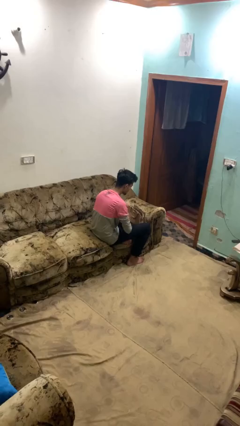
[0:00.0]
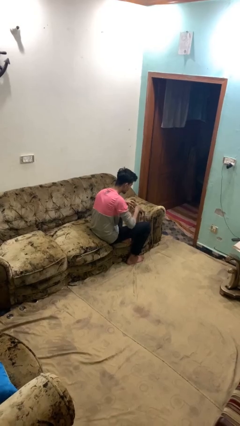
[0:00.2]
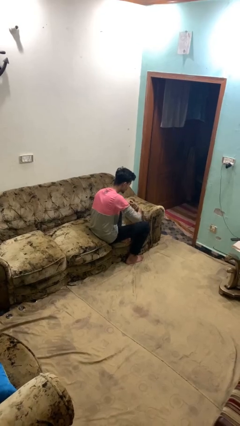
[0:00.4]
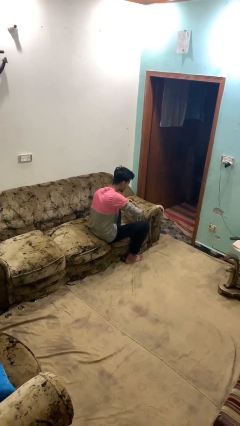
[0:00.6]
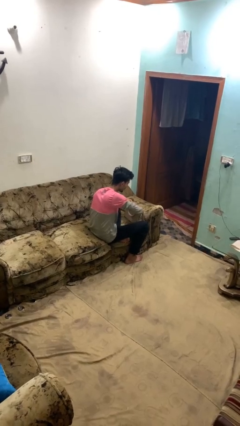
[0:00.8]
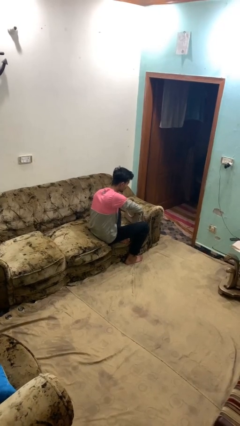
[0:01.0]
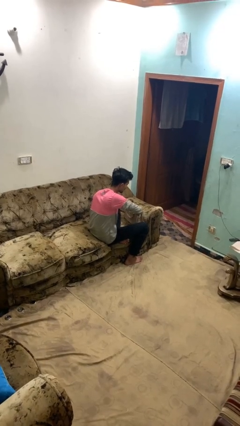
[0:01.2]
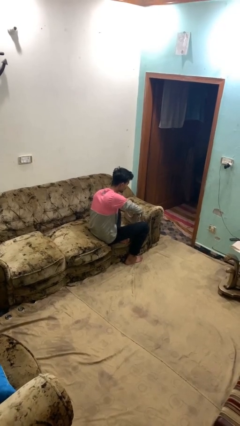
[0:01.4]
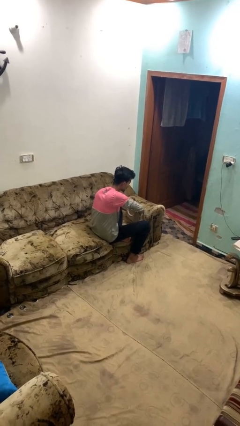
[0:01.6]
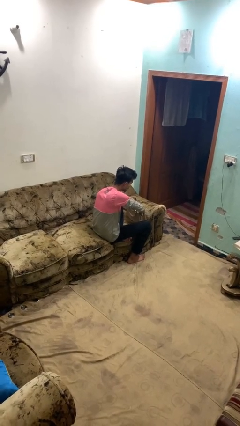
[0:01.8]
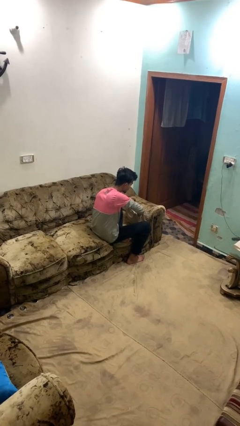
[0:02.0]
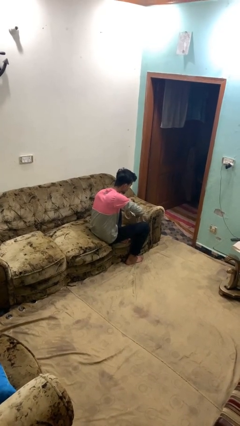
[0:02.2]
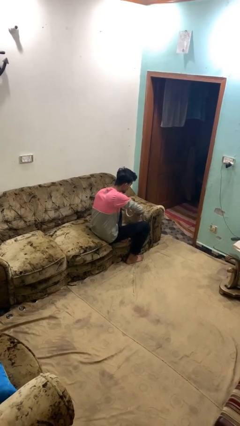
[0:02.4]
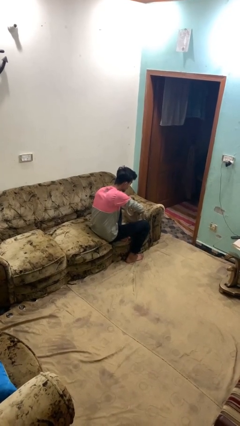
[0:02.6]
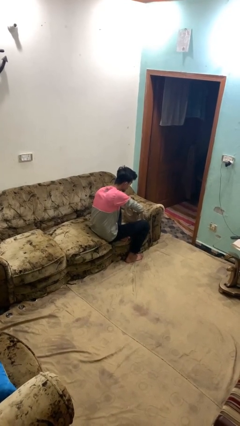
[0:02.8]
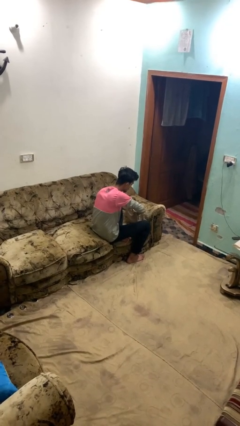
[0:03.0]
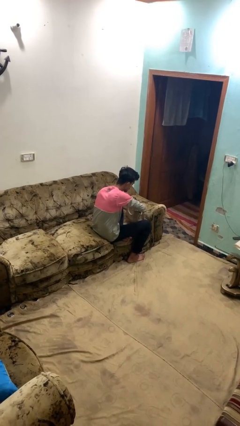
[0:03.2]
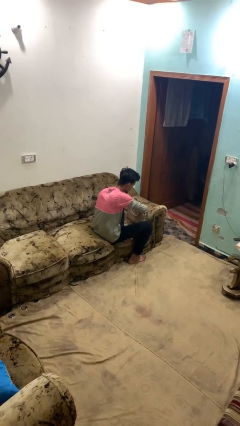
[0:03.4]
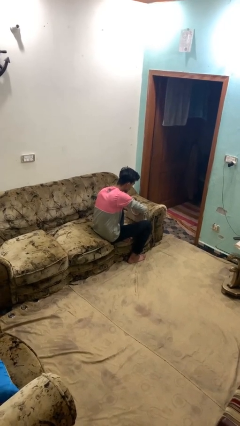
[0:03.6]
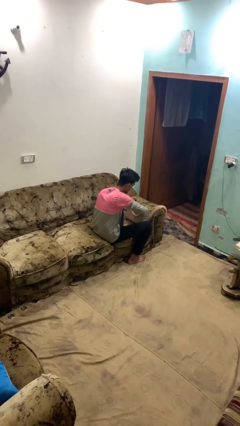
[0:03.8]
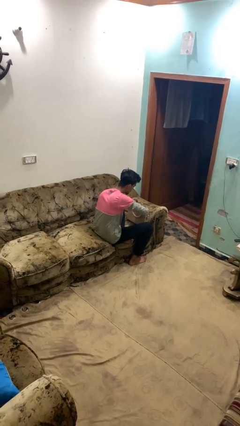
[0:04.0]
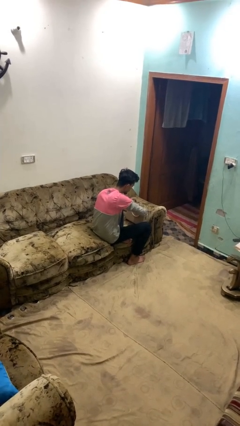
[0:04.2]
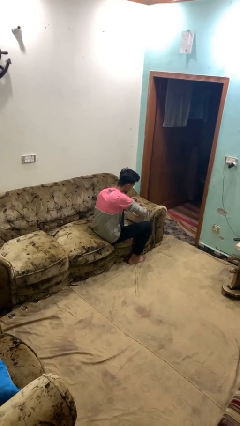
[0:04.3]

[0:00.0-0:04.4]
person searches in purse

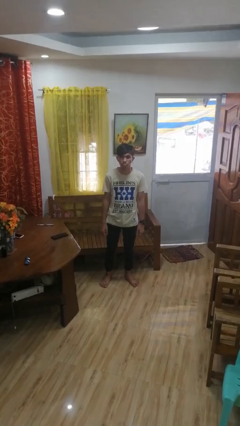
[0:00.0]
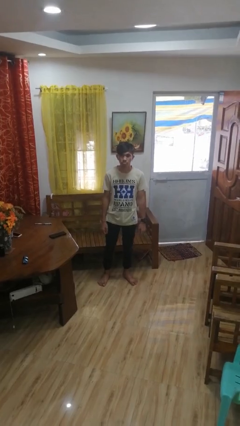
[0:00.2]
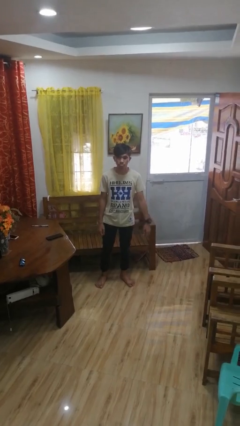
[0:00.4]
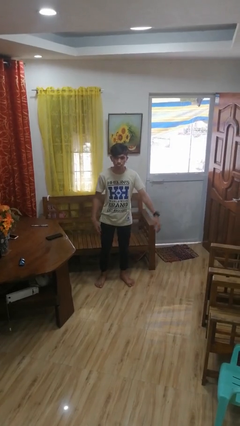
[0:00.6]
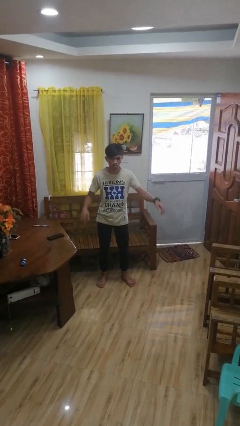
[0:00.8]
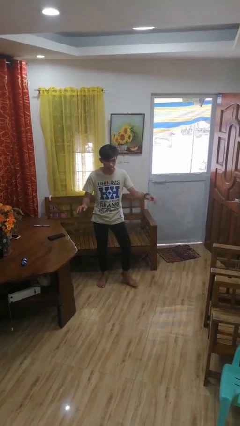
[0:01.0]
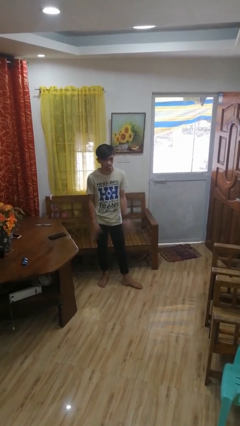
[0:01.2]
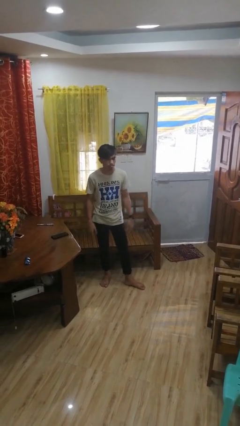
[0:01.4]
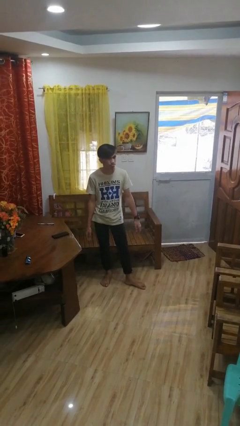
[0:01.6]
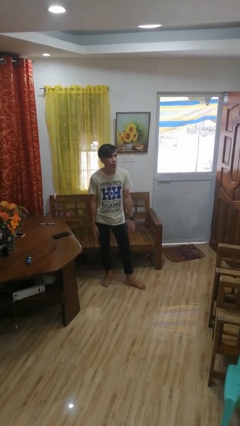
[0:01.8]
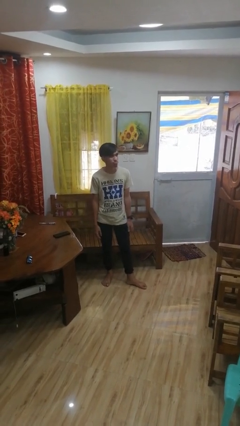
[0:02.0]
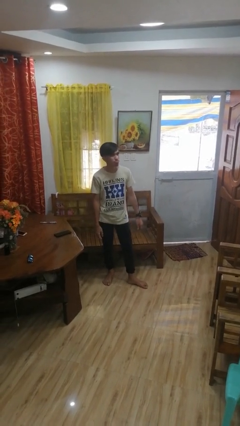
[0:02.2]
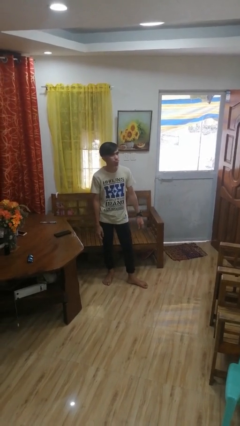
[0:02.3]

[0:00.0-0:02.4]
person slaps hands on thighs

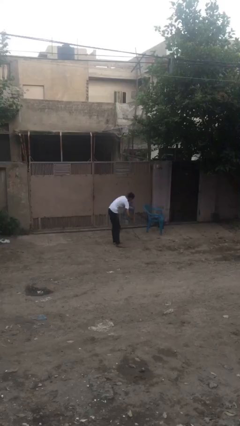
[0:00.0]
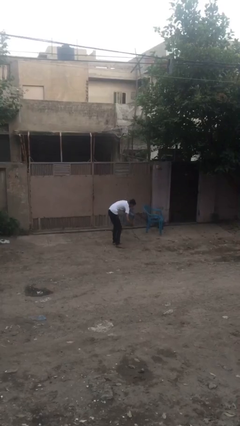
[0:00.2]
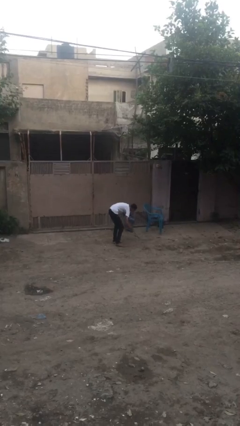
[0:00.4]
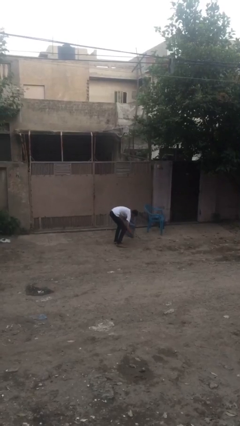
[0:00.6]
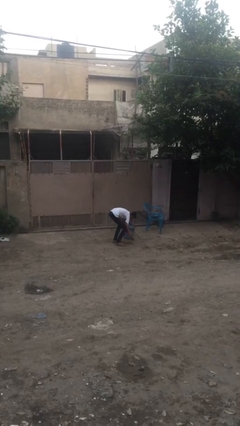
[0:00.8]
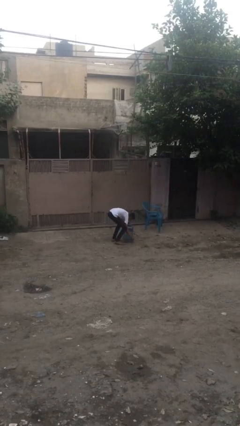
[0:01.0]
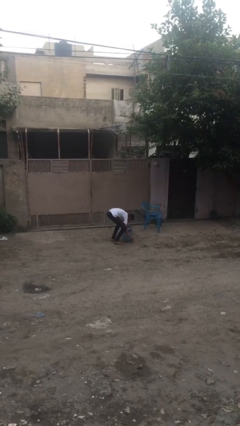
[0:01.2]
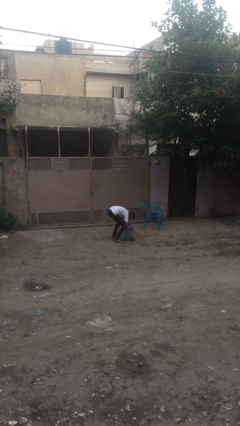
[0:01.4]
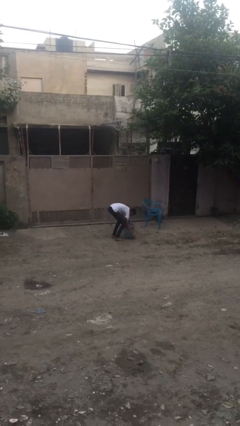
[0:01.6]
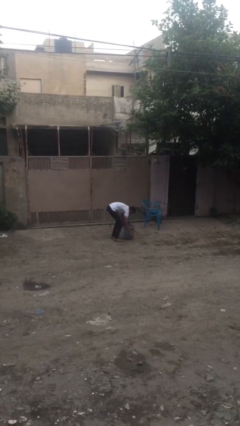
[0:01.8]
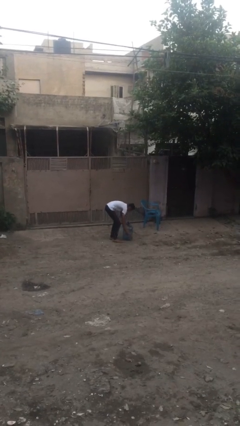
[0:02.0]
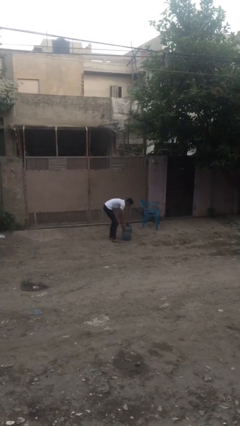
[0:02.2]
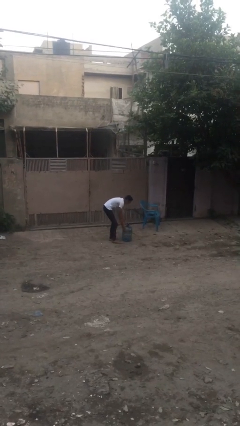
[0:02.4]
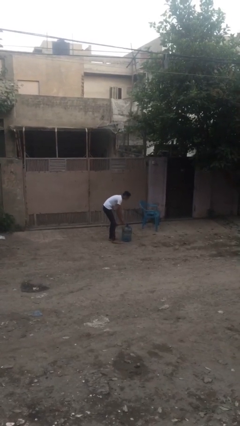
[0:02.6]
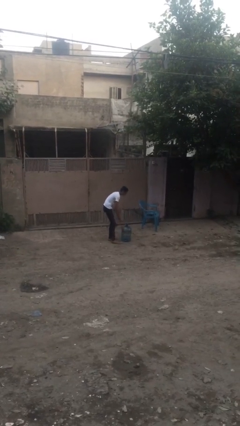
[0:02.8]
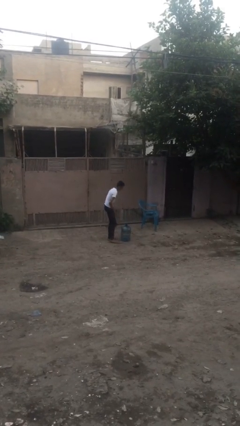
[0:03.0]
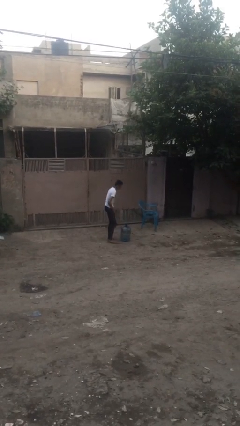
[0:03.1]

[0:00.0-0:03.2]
person puts down object on floor

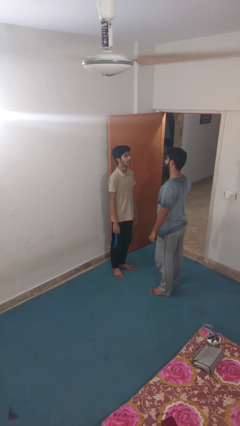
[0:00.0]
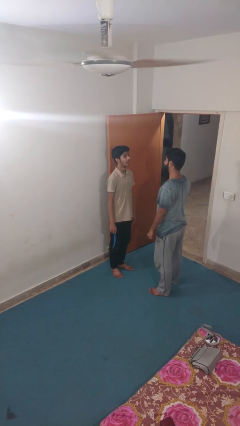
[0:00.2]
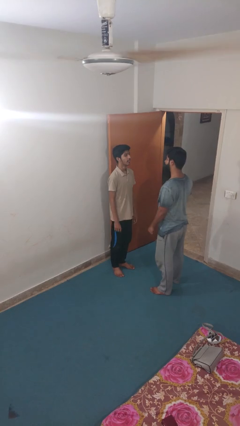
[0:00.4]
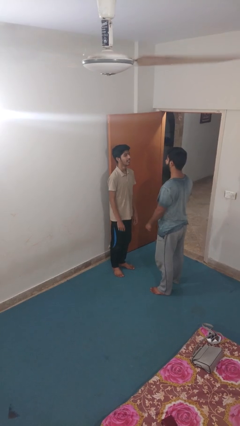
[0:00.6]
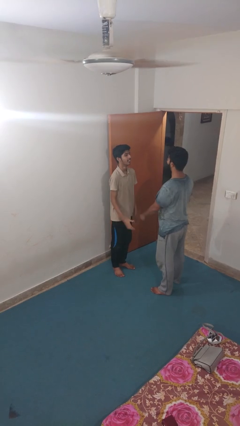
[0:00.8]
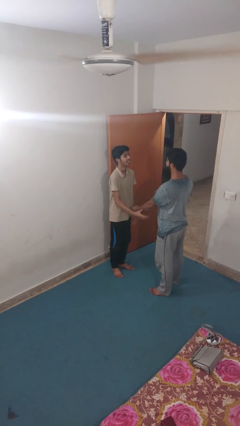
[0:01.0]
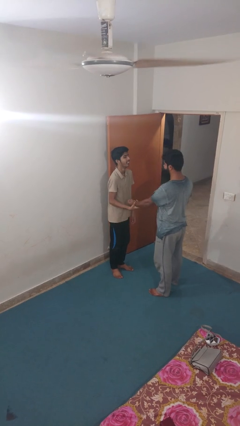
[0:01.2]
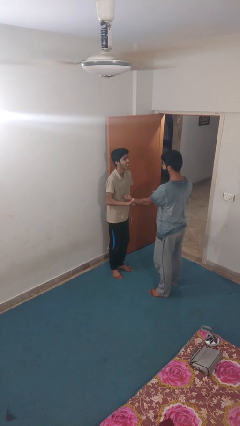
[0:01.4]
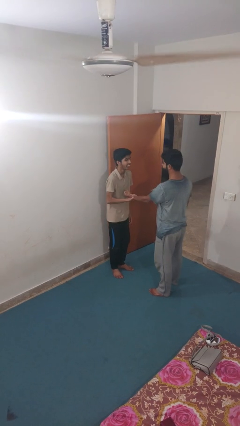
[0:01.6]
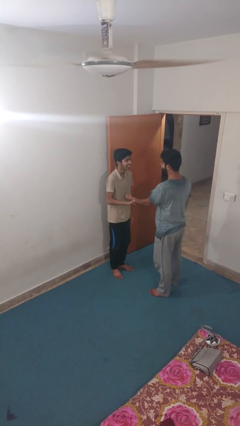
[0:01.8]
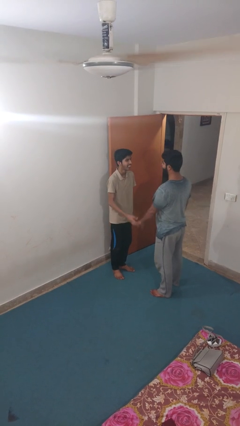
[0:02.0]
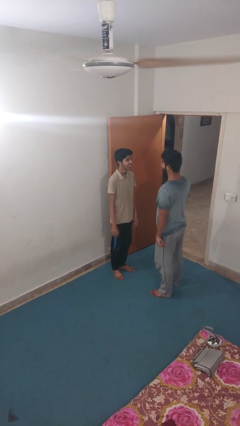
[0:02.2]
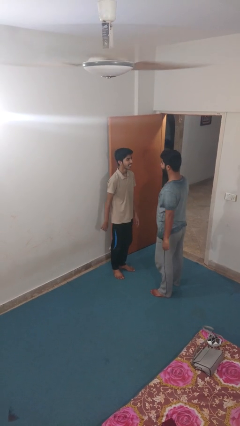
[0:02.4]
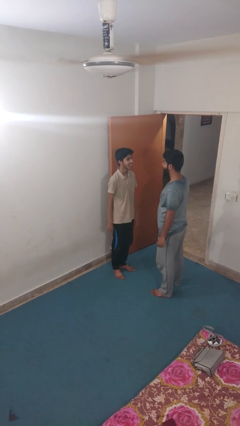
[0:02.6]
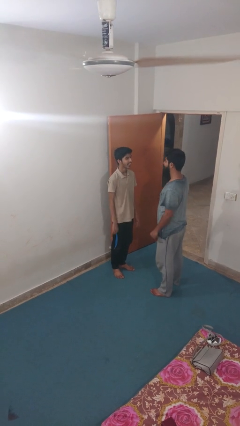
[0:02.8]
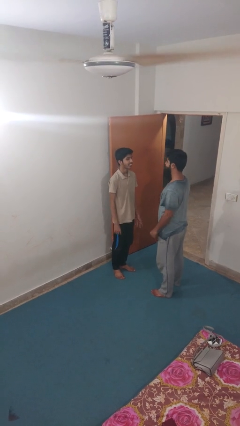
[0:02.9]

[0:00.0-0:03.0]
person grabs person by forearm

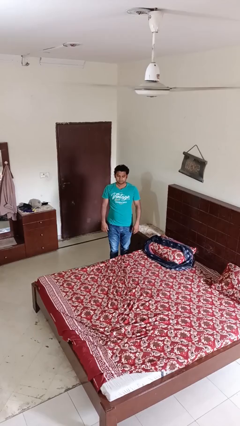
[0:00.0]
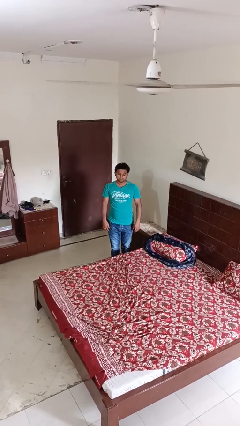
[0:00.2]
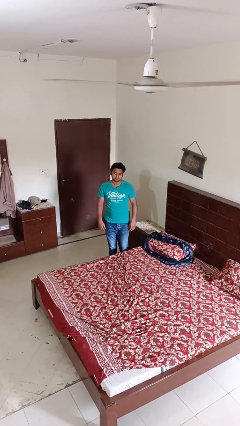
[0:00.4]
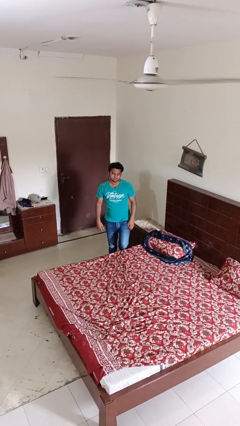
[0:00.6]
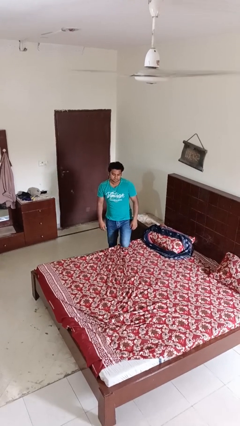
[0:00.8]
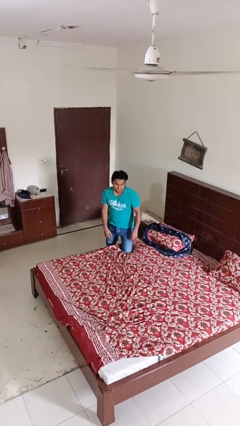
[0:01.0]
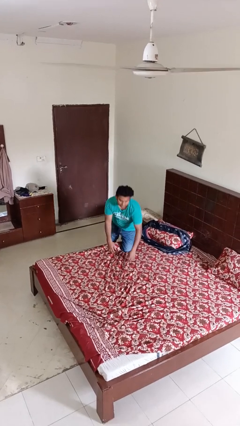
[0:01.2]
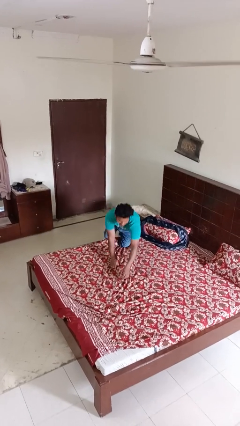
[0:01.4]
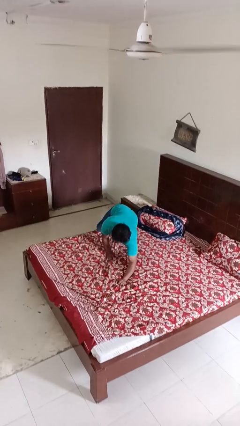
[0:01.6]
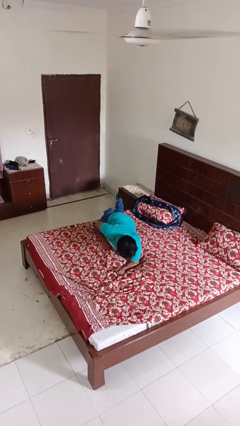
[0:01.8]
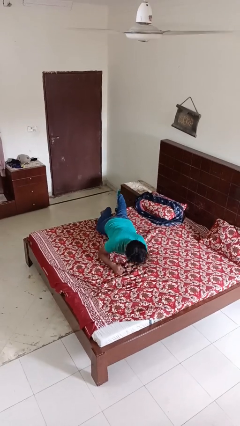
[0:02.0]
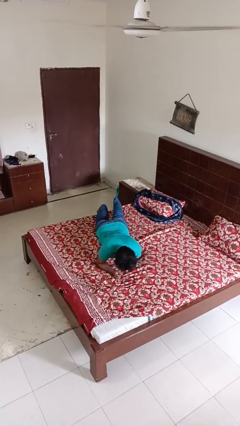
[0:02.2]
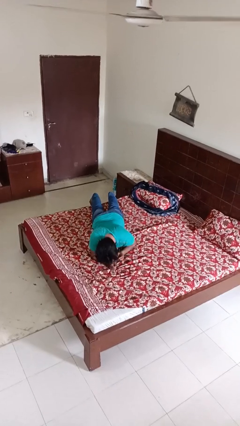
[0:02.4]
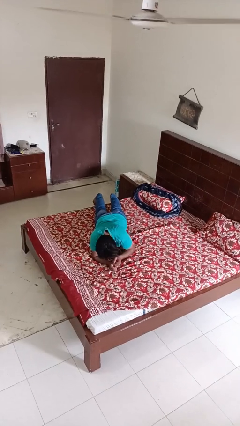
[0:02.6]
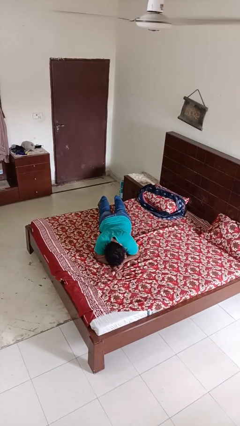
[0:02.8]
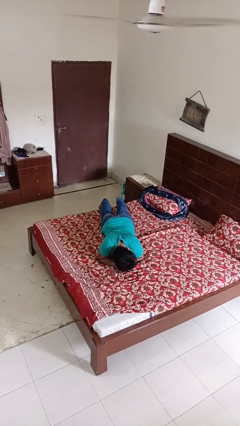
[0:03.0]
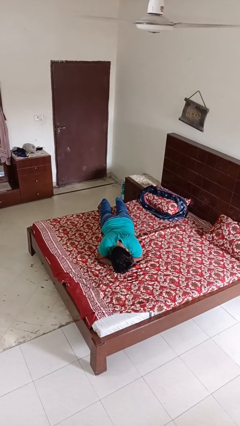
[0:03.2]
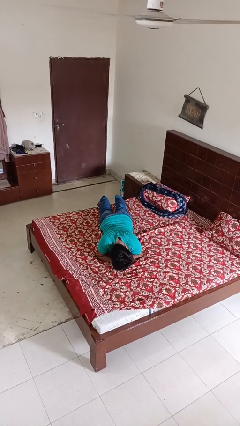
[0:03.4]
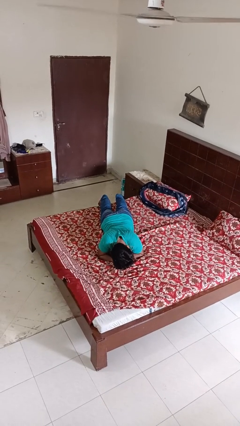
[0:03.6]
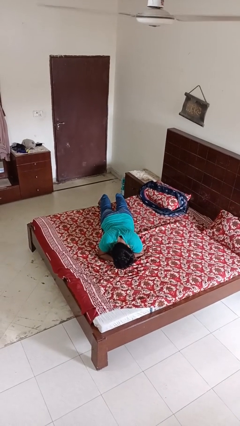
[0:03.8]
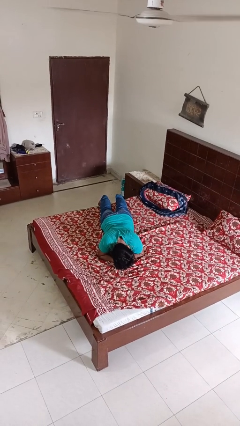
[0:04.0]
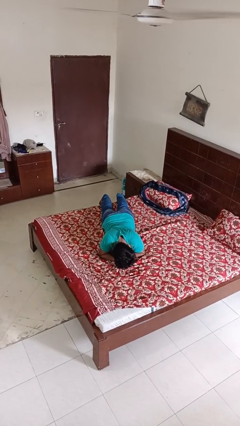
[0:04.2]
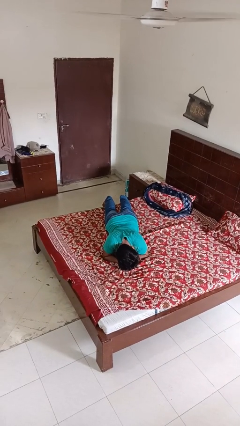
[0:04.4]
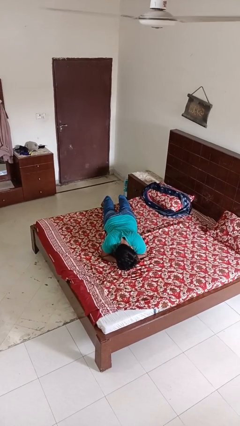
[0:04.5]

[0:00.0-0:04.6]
person lies down on bed

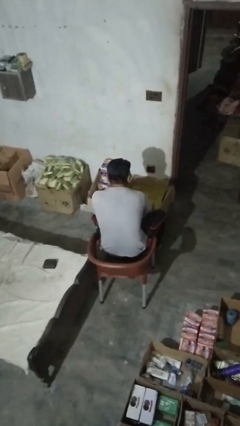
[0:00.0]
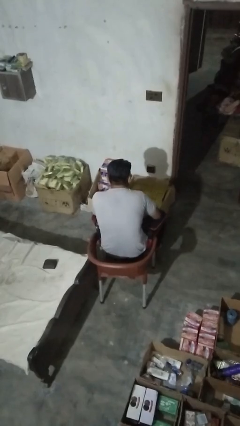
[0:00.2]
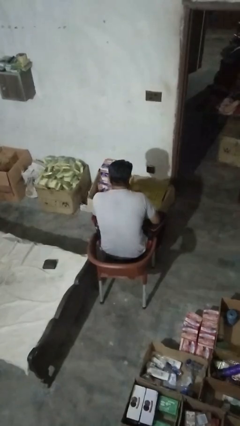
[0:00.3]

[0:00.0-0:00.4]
person searches in box
